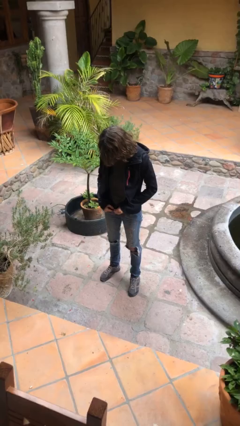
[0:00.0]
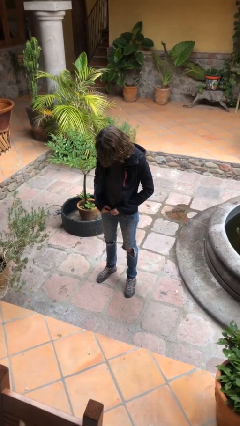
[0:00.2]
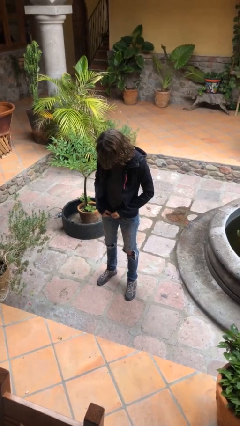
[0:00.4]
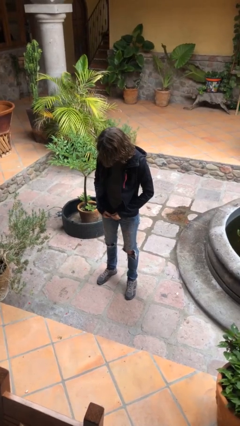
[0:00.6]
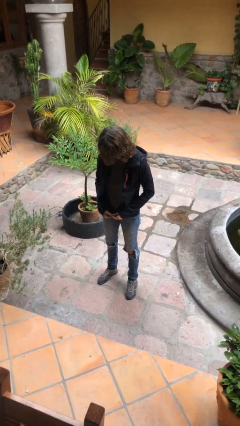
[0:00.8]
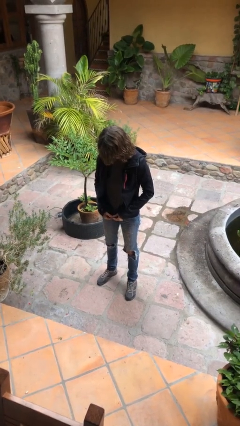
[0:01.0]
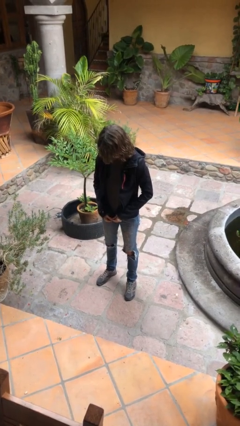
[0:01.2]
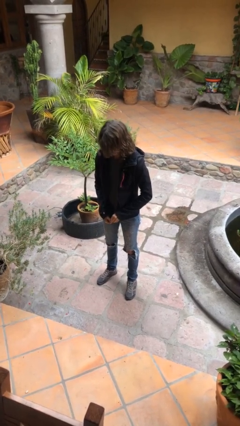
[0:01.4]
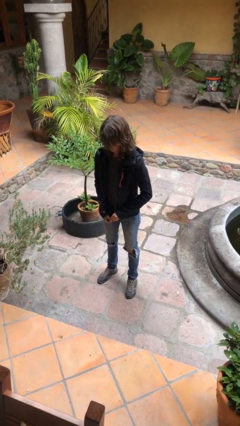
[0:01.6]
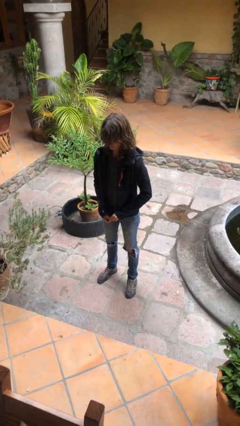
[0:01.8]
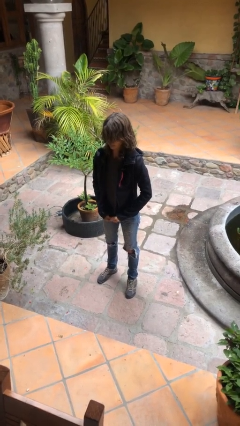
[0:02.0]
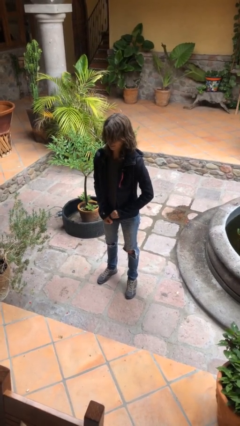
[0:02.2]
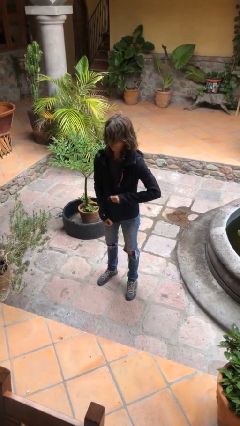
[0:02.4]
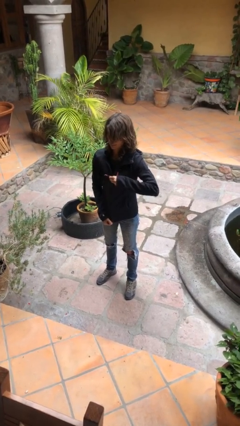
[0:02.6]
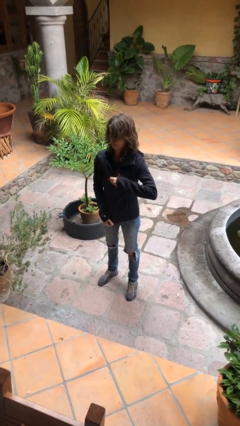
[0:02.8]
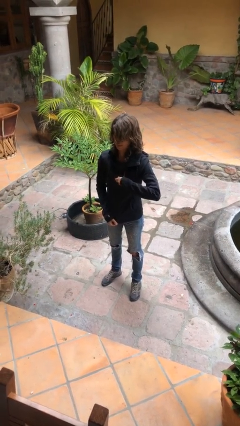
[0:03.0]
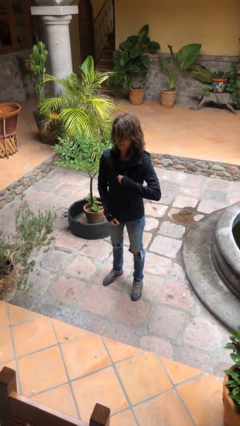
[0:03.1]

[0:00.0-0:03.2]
person zips up jacket

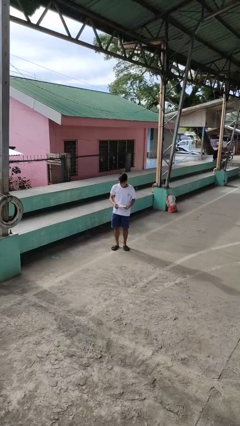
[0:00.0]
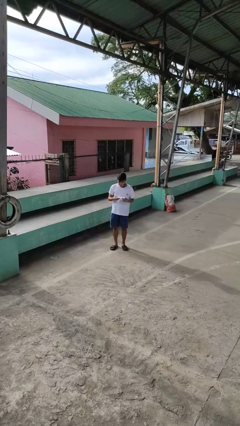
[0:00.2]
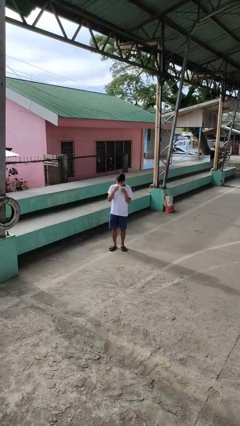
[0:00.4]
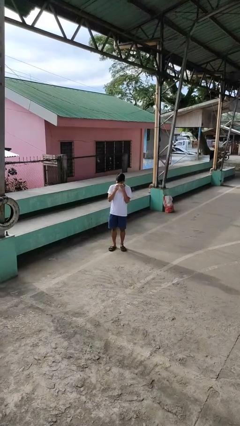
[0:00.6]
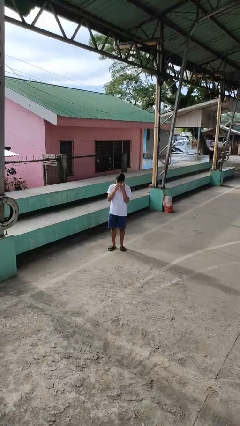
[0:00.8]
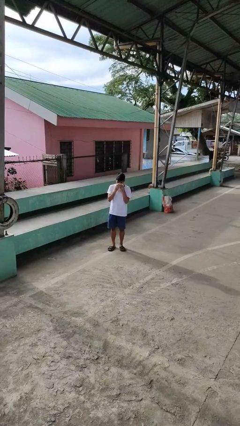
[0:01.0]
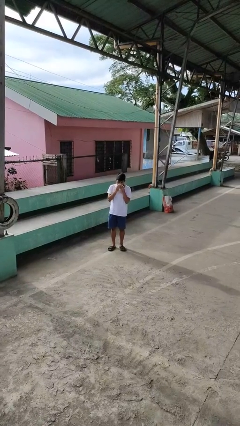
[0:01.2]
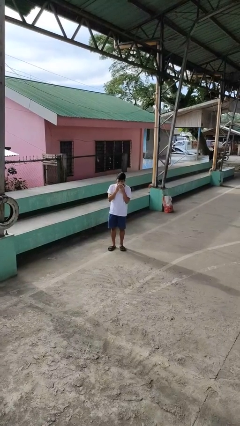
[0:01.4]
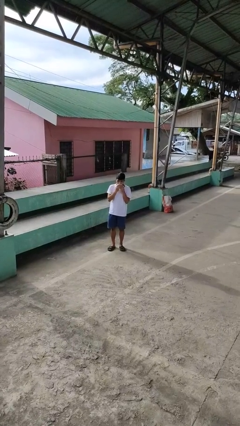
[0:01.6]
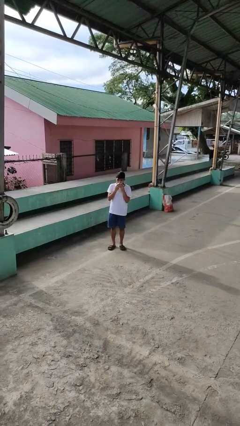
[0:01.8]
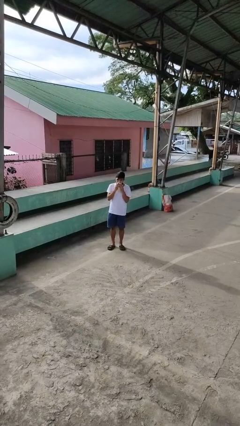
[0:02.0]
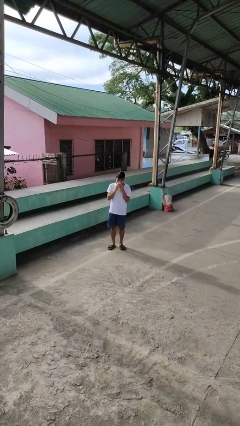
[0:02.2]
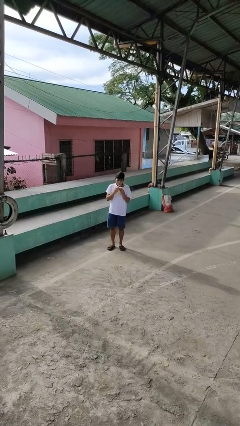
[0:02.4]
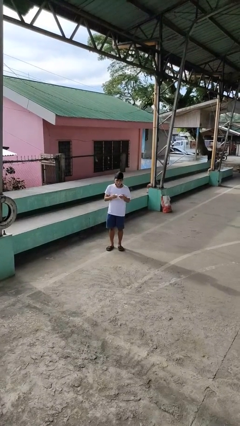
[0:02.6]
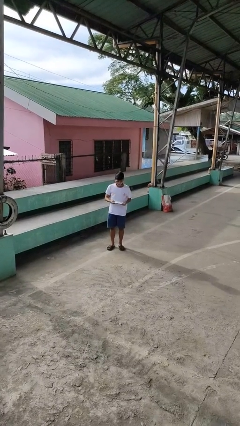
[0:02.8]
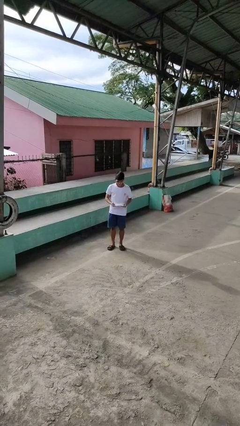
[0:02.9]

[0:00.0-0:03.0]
person wipes mouth with napkin

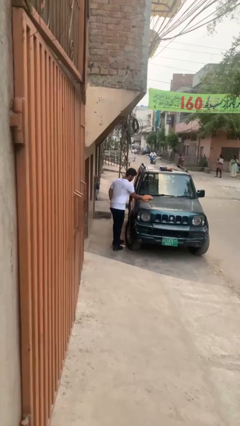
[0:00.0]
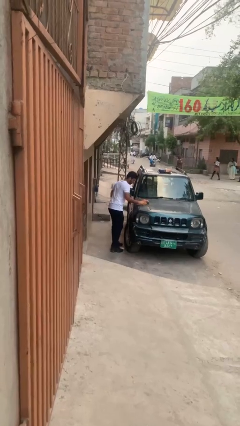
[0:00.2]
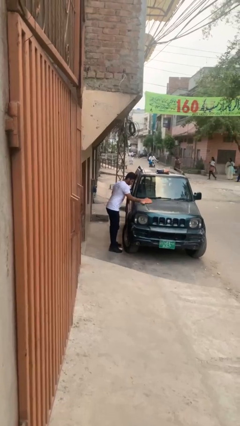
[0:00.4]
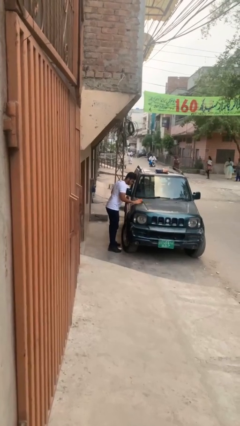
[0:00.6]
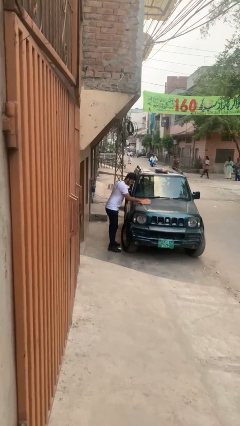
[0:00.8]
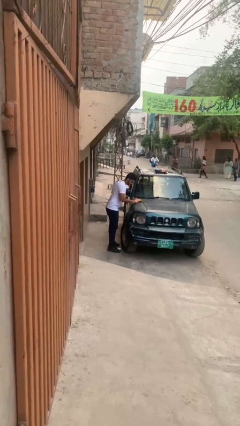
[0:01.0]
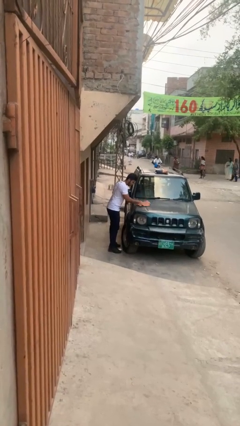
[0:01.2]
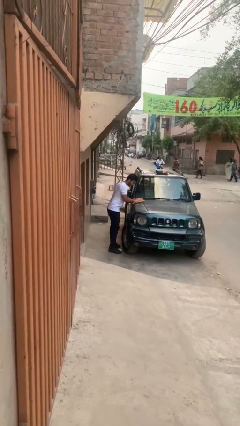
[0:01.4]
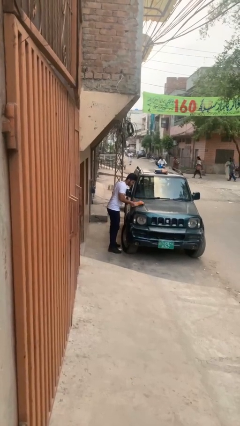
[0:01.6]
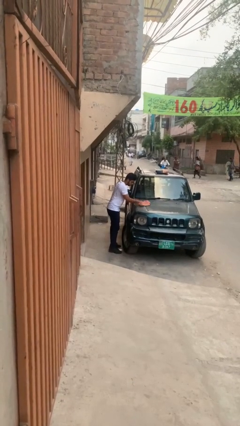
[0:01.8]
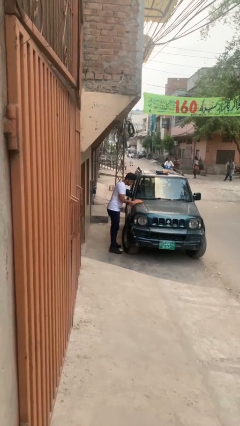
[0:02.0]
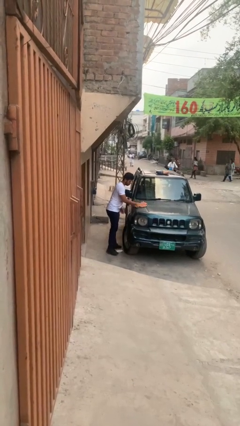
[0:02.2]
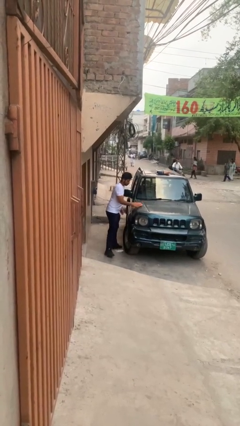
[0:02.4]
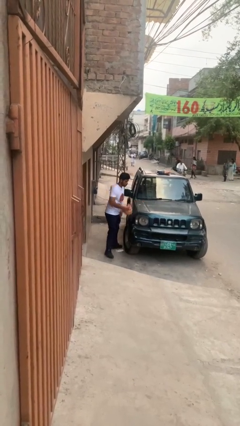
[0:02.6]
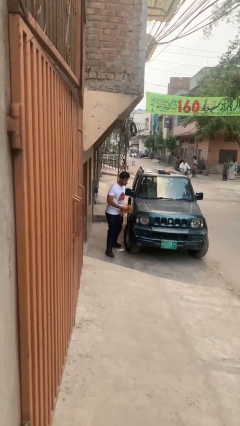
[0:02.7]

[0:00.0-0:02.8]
person polishes car with rag

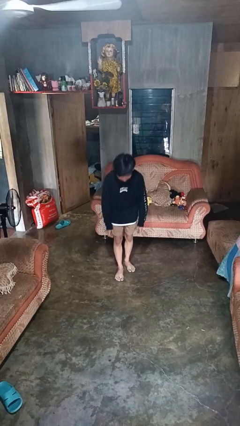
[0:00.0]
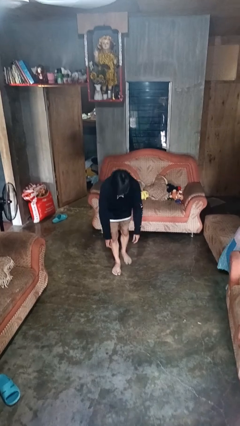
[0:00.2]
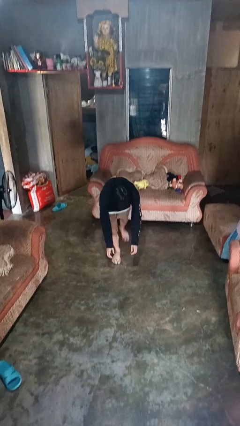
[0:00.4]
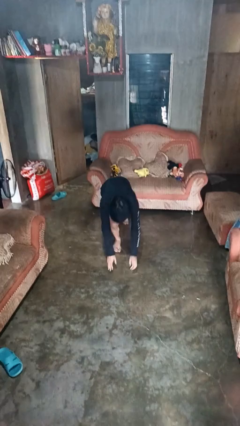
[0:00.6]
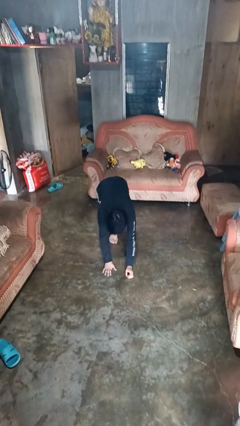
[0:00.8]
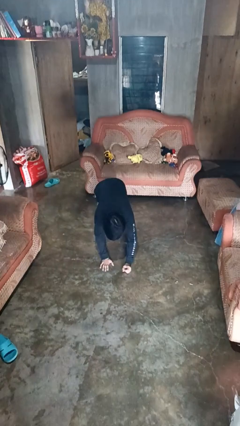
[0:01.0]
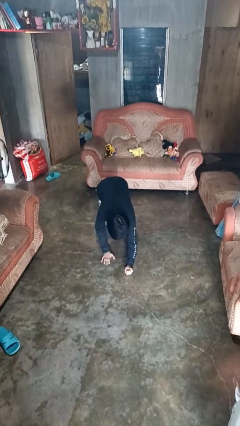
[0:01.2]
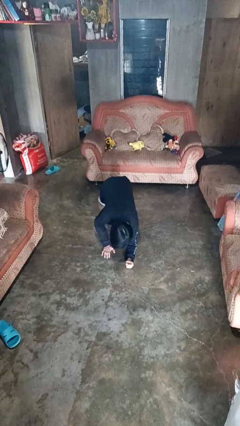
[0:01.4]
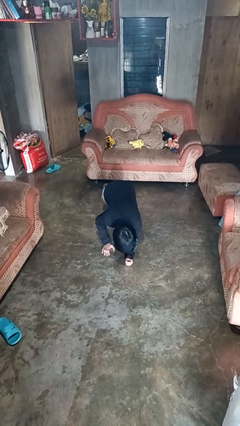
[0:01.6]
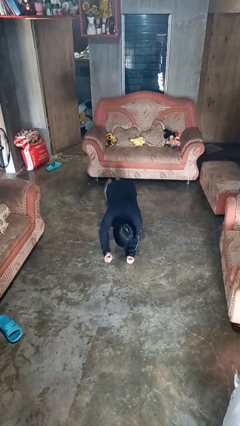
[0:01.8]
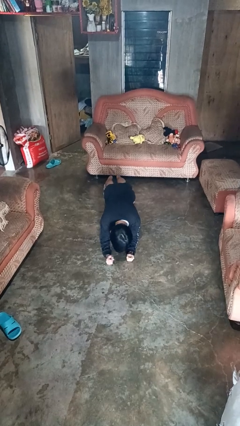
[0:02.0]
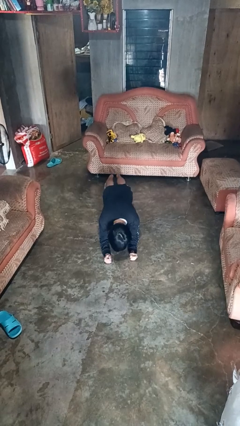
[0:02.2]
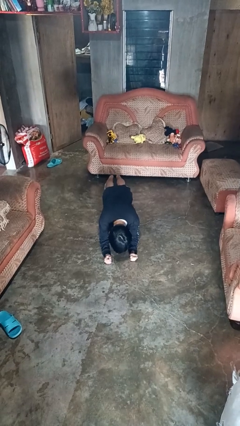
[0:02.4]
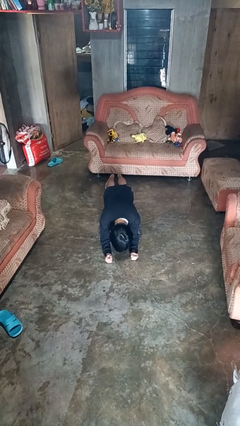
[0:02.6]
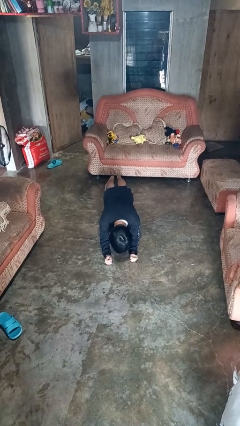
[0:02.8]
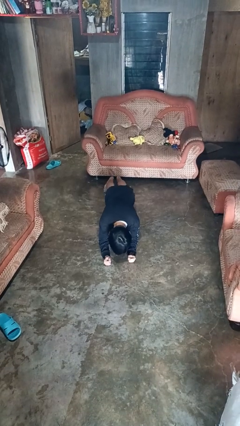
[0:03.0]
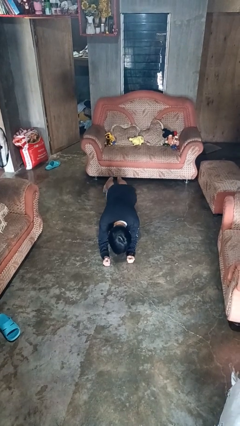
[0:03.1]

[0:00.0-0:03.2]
person exercises with plank

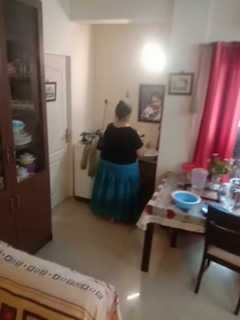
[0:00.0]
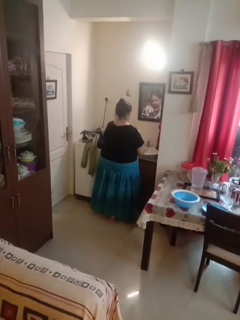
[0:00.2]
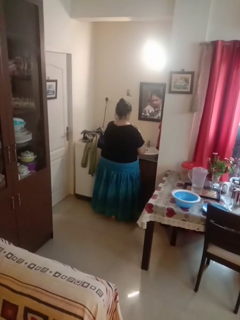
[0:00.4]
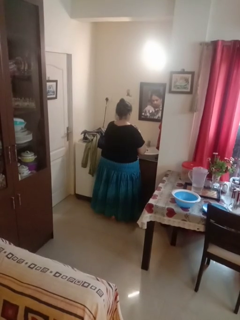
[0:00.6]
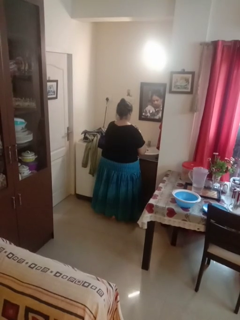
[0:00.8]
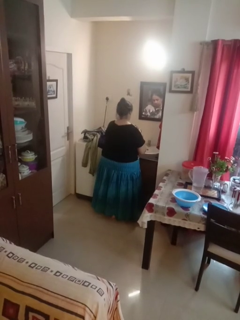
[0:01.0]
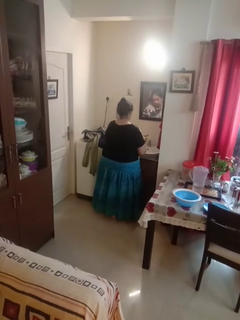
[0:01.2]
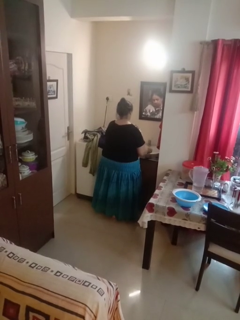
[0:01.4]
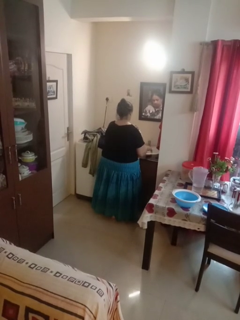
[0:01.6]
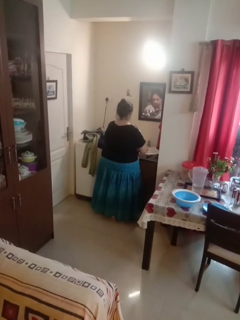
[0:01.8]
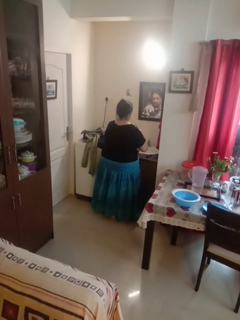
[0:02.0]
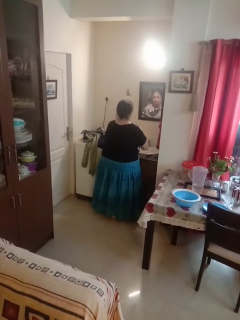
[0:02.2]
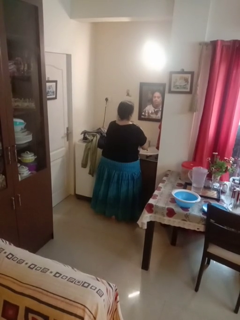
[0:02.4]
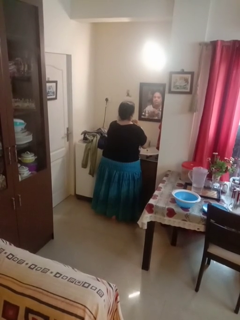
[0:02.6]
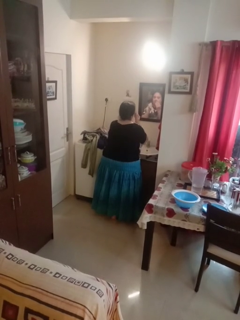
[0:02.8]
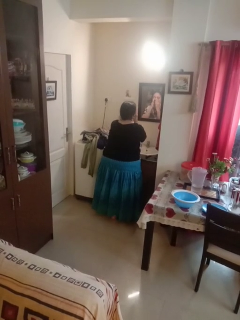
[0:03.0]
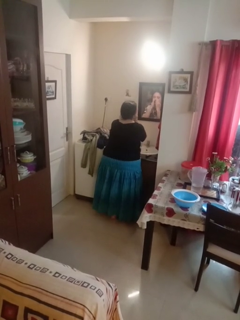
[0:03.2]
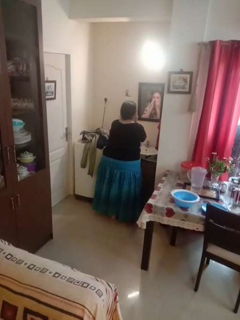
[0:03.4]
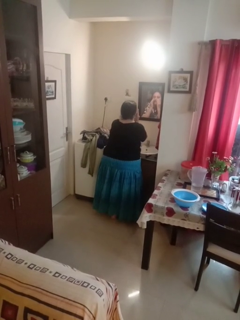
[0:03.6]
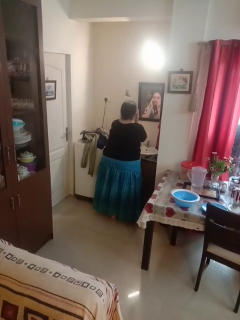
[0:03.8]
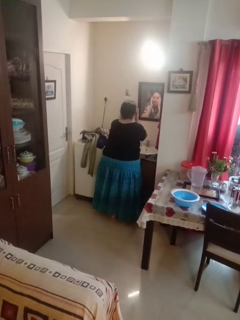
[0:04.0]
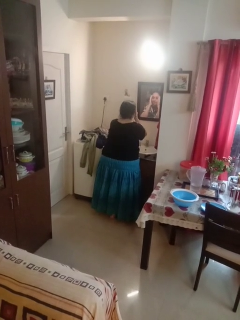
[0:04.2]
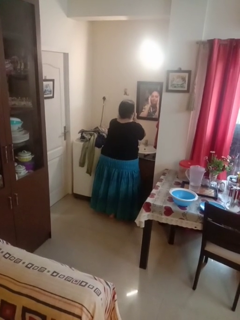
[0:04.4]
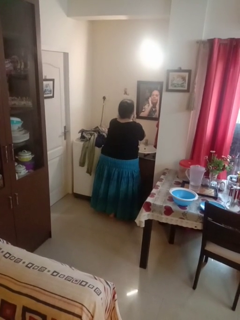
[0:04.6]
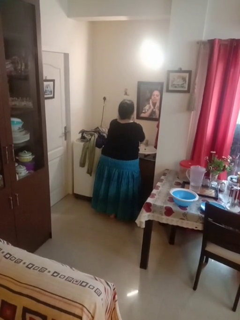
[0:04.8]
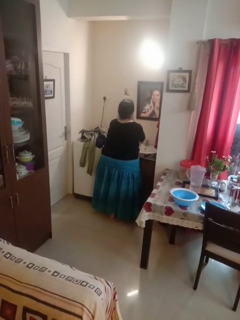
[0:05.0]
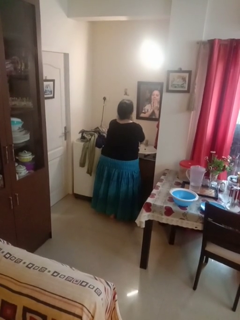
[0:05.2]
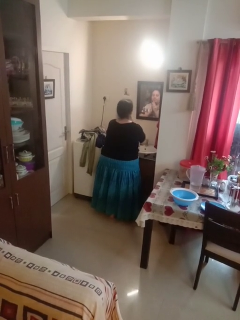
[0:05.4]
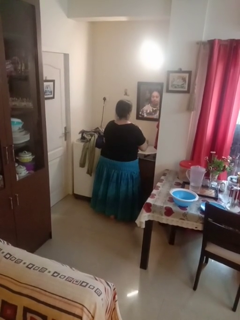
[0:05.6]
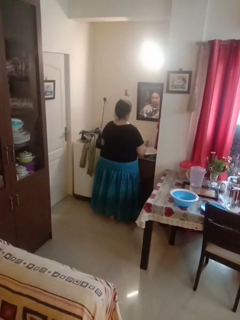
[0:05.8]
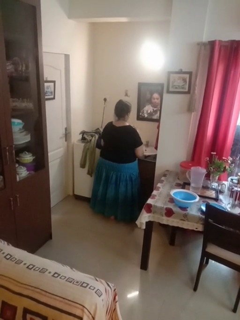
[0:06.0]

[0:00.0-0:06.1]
person applies foundation makeup

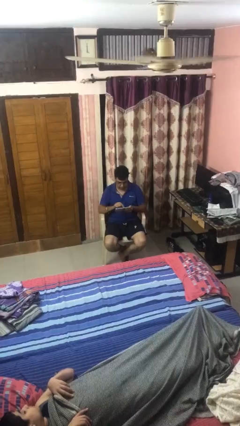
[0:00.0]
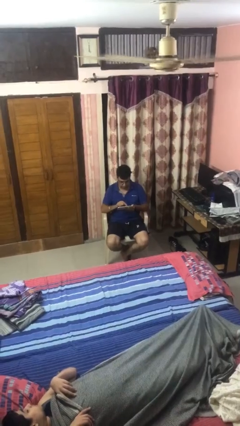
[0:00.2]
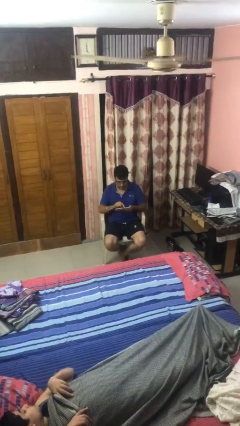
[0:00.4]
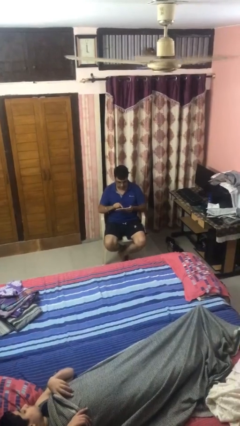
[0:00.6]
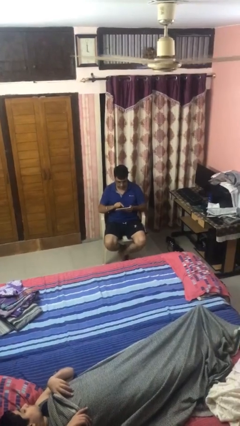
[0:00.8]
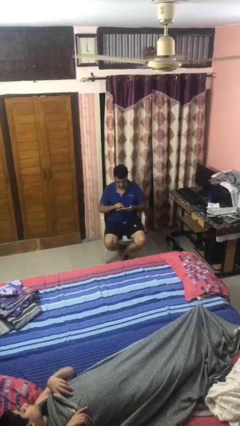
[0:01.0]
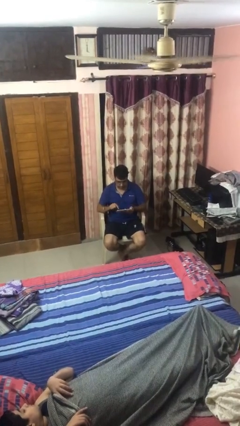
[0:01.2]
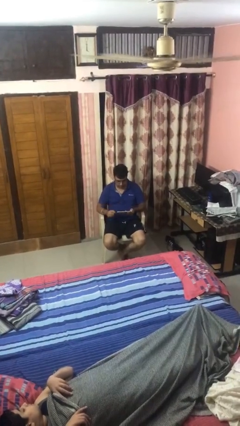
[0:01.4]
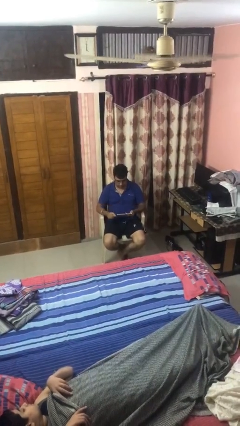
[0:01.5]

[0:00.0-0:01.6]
person interacts with tablet
